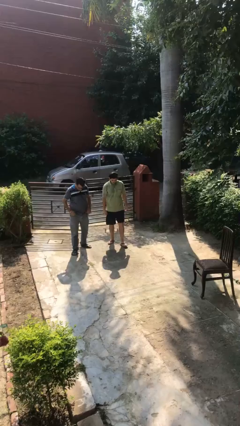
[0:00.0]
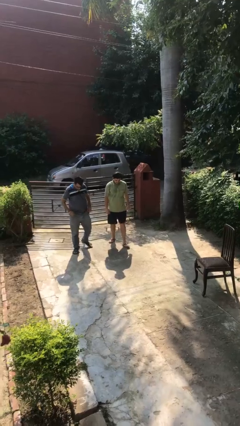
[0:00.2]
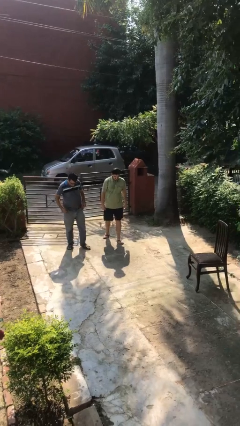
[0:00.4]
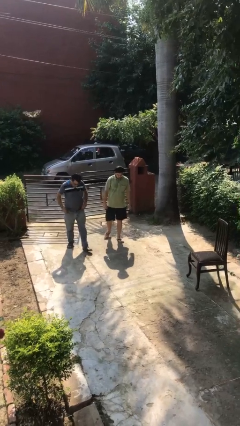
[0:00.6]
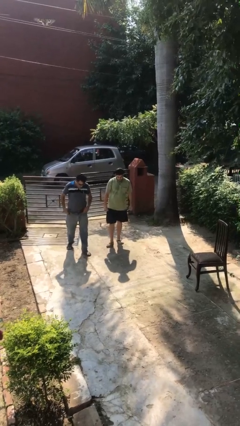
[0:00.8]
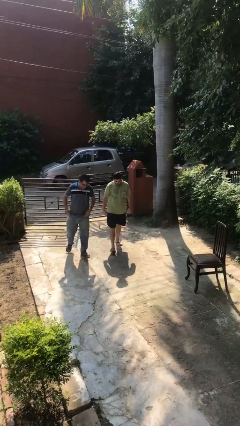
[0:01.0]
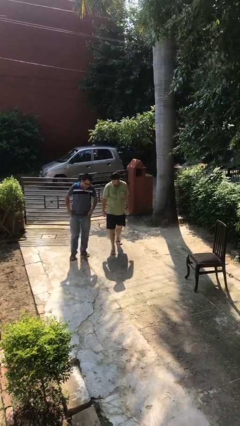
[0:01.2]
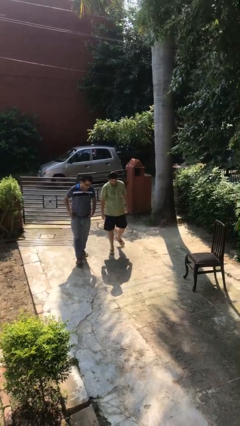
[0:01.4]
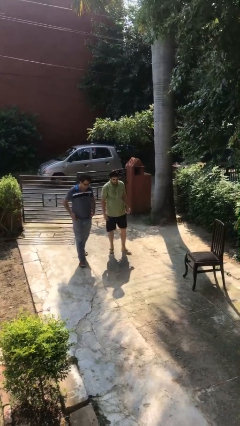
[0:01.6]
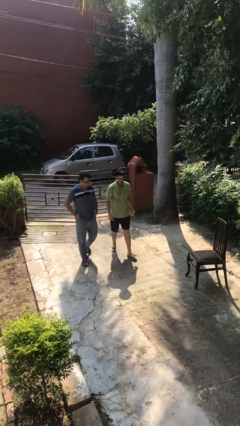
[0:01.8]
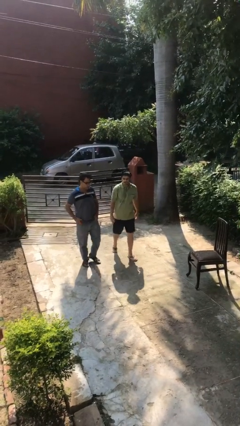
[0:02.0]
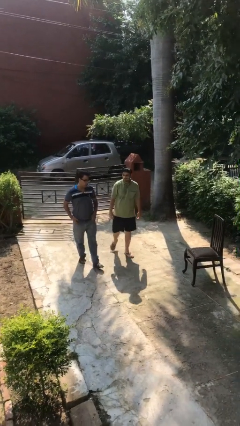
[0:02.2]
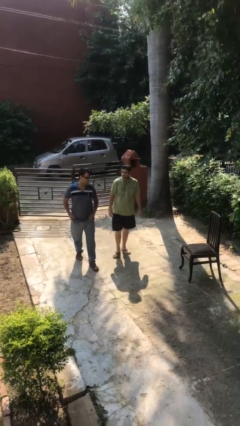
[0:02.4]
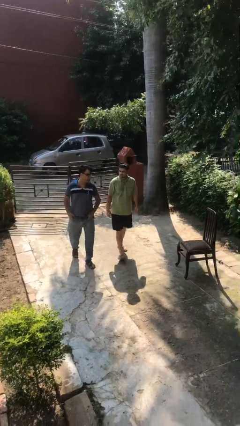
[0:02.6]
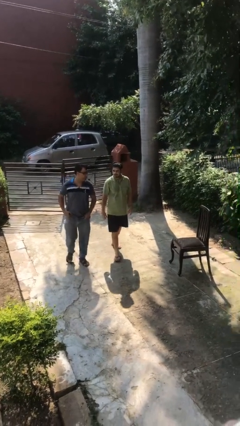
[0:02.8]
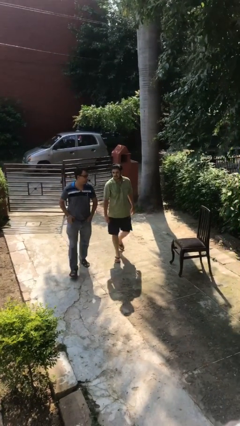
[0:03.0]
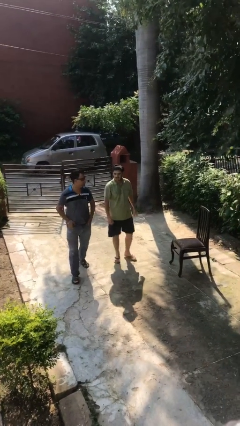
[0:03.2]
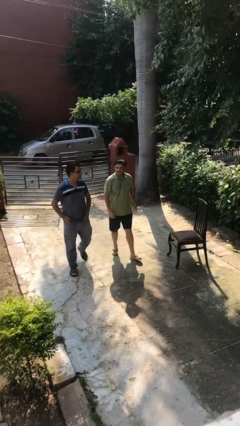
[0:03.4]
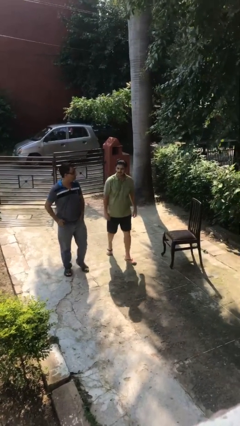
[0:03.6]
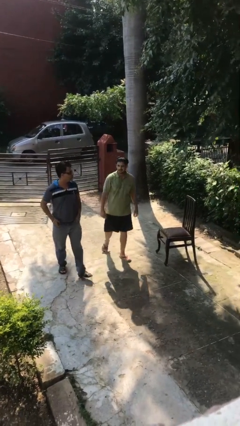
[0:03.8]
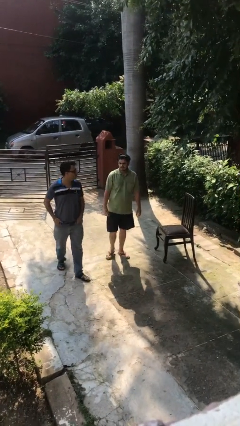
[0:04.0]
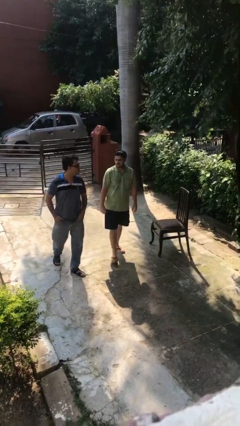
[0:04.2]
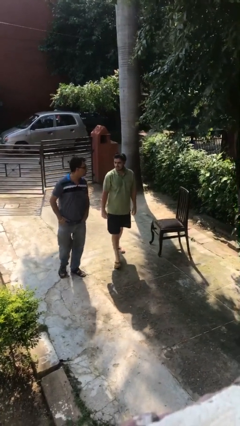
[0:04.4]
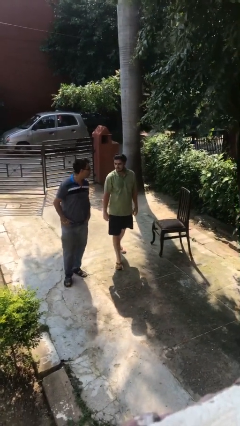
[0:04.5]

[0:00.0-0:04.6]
person talks to person

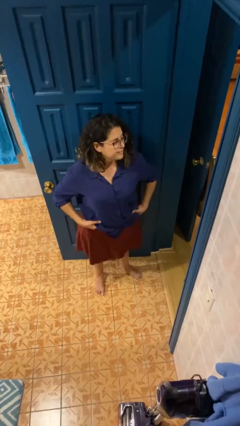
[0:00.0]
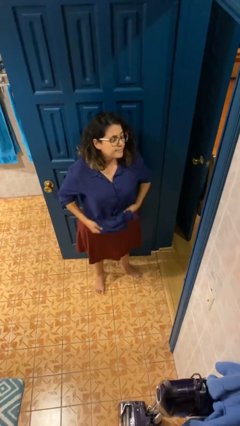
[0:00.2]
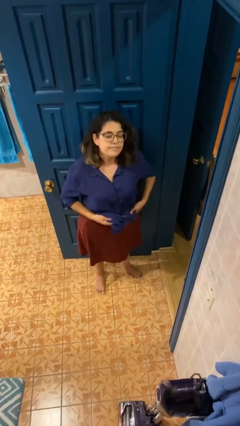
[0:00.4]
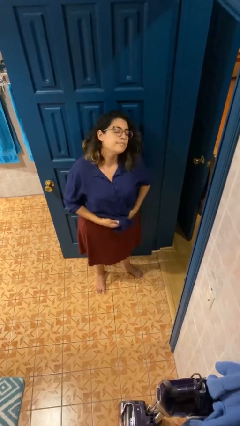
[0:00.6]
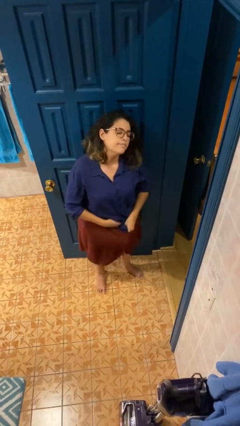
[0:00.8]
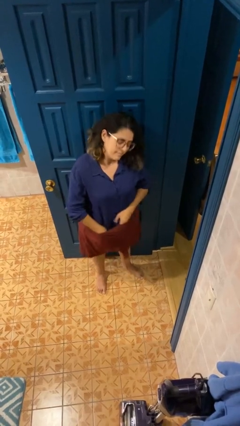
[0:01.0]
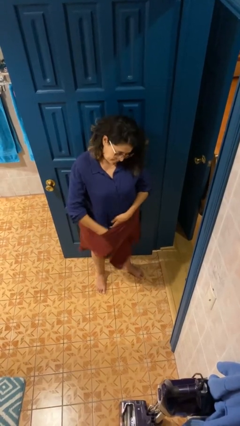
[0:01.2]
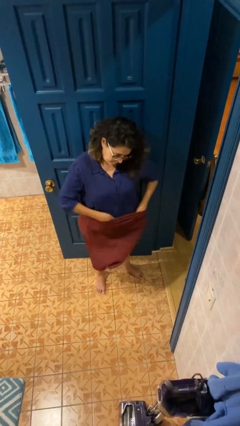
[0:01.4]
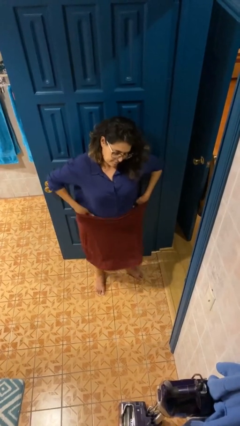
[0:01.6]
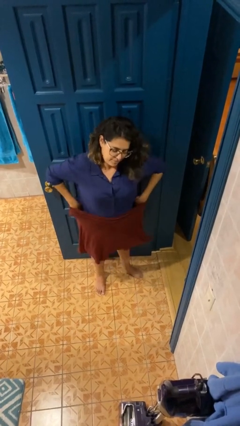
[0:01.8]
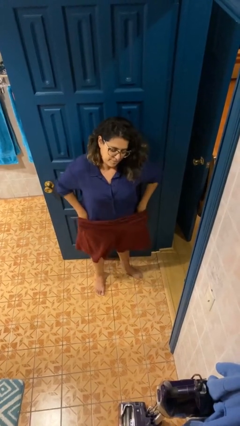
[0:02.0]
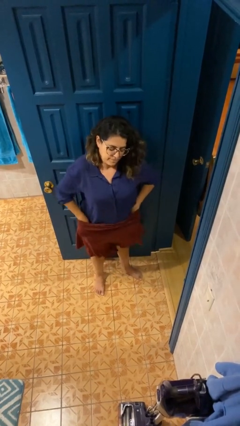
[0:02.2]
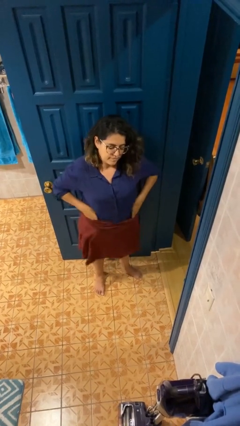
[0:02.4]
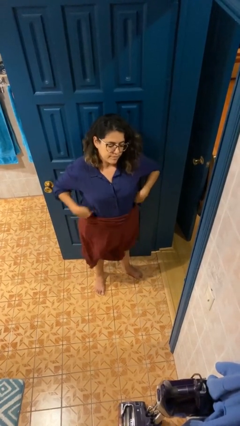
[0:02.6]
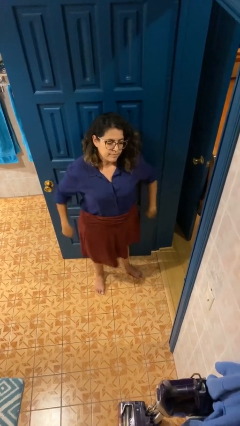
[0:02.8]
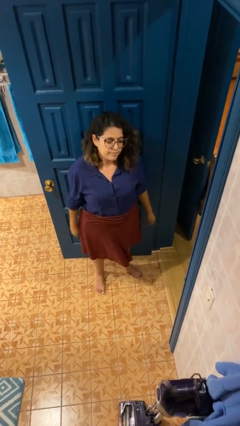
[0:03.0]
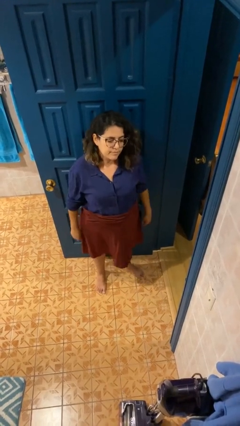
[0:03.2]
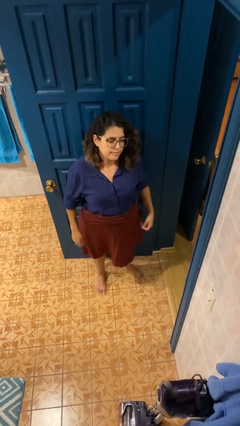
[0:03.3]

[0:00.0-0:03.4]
person tucks in shirt

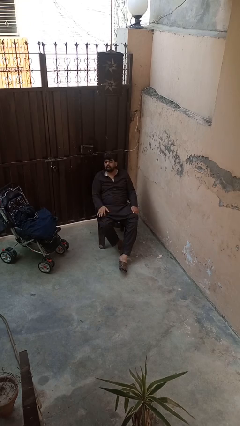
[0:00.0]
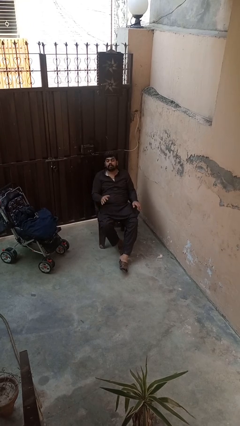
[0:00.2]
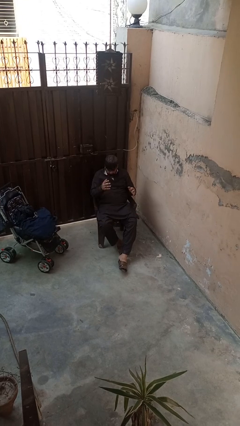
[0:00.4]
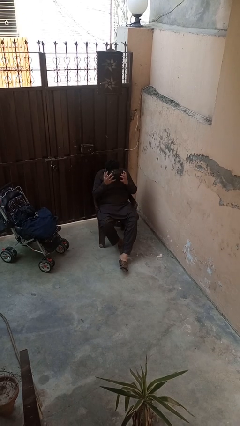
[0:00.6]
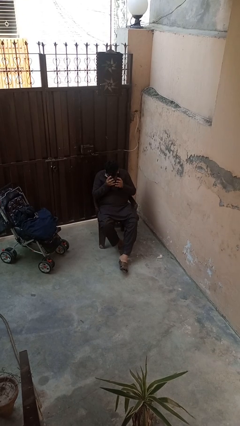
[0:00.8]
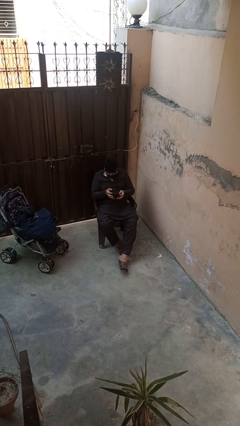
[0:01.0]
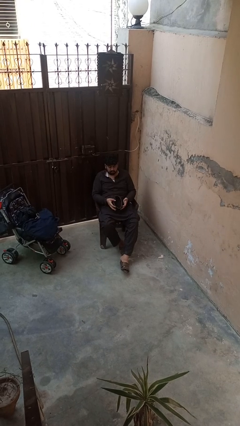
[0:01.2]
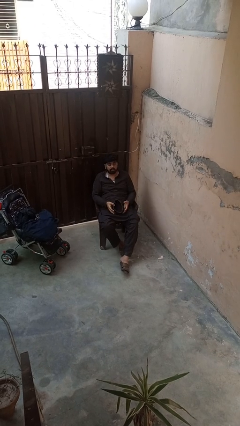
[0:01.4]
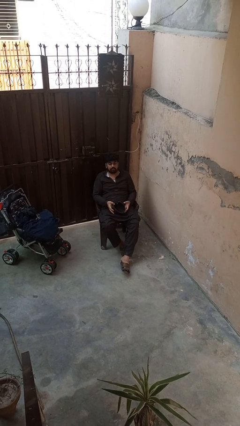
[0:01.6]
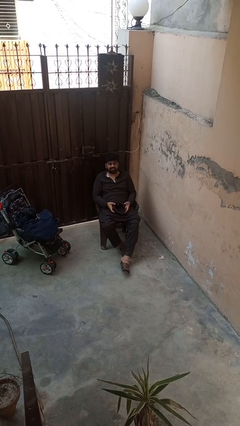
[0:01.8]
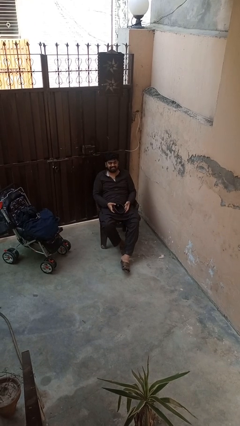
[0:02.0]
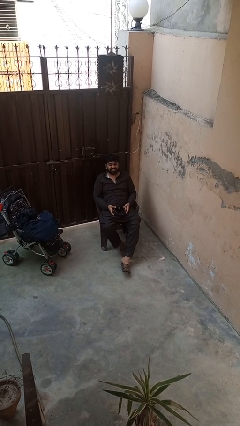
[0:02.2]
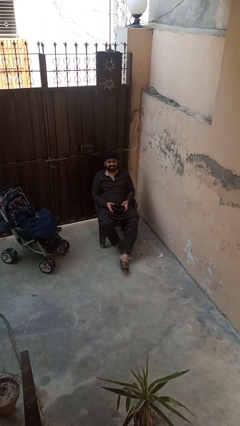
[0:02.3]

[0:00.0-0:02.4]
person takes off hat

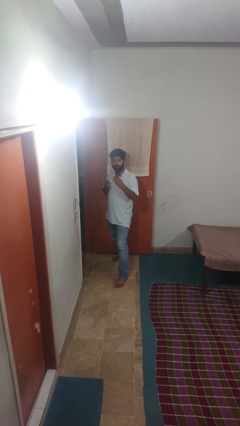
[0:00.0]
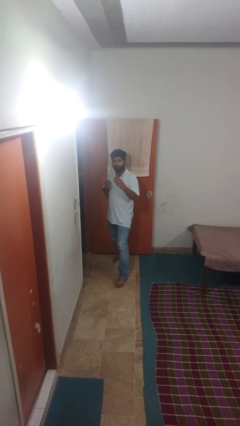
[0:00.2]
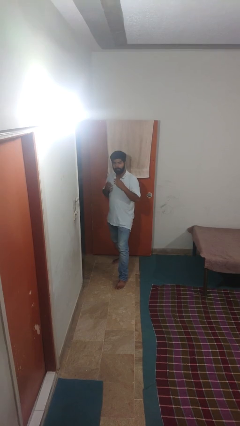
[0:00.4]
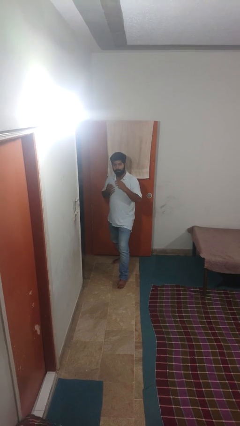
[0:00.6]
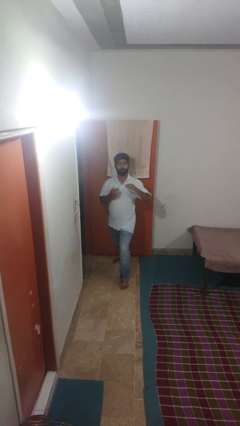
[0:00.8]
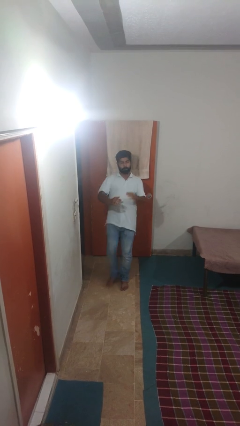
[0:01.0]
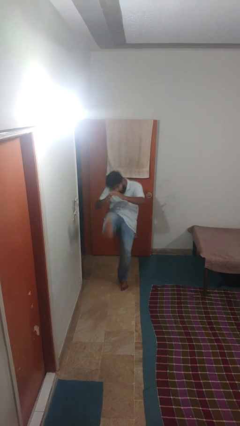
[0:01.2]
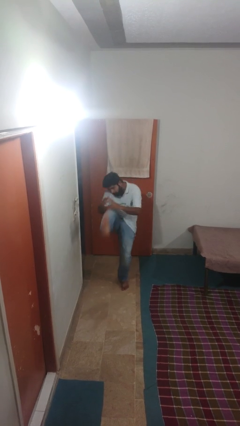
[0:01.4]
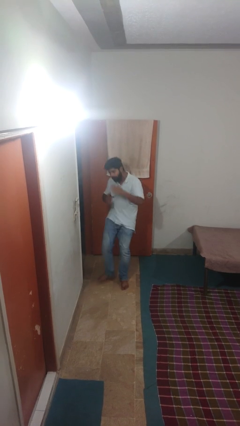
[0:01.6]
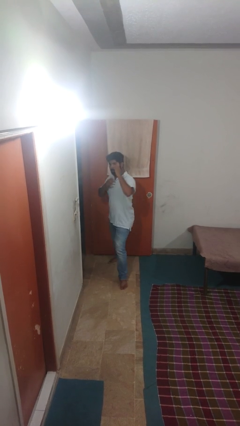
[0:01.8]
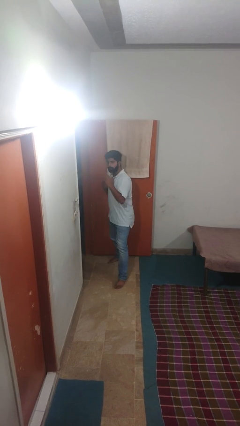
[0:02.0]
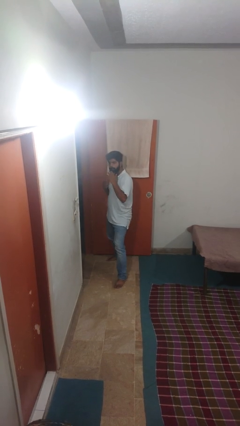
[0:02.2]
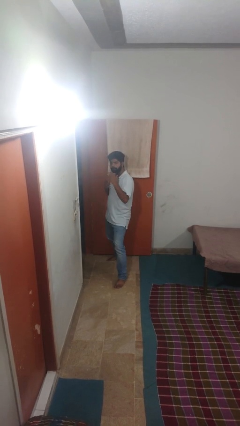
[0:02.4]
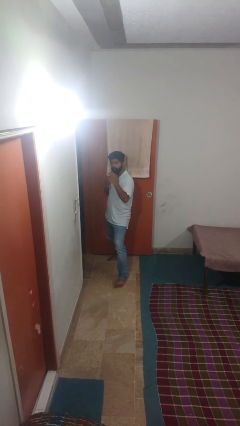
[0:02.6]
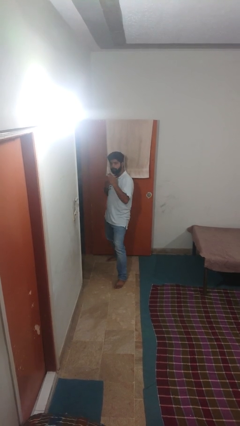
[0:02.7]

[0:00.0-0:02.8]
person karate kicks

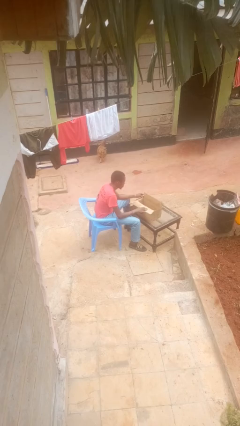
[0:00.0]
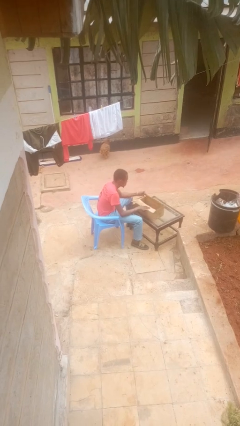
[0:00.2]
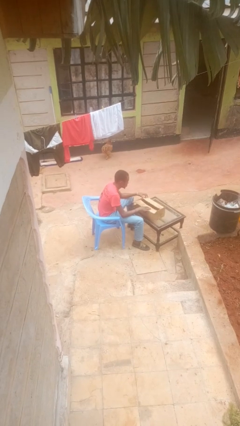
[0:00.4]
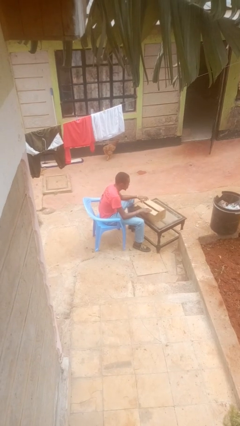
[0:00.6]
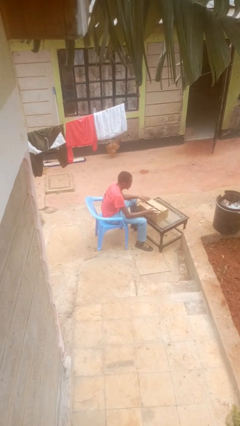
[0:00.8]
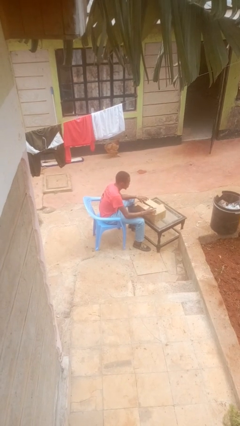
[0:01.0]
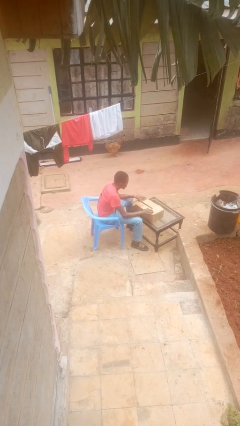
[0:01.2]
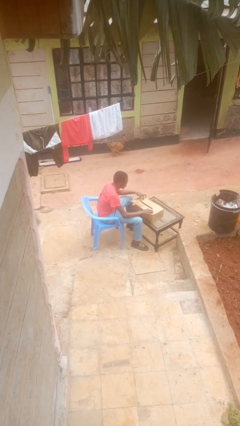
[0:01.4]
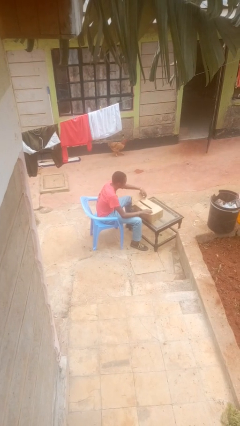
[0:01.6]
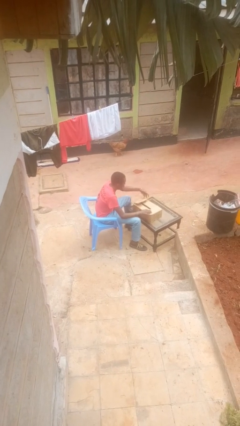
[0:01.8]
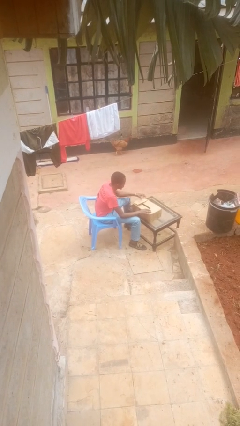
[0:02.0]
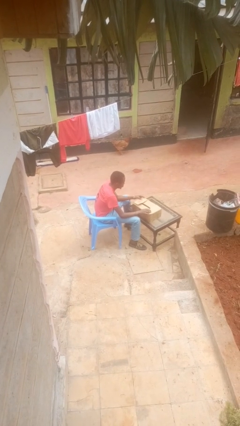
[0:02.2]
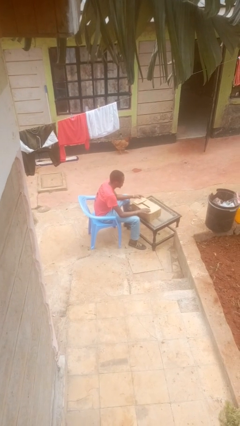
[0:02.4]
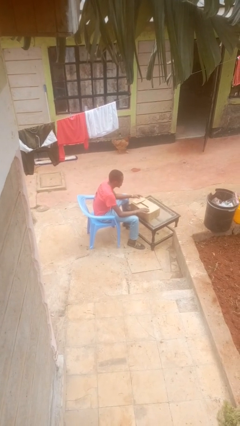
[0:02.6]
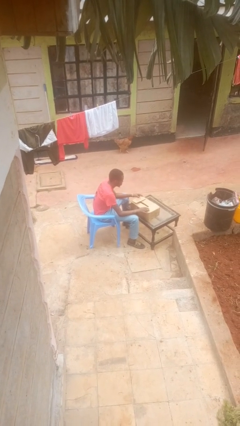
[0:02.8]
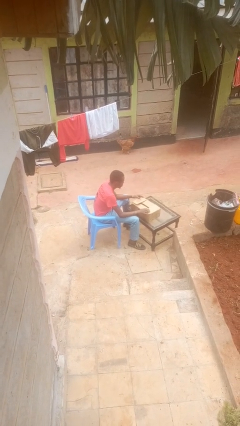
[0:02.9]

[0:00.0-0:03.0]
person closes box

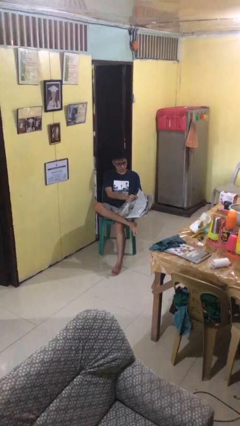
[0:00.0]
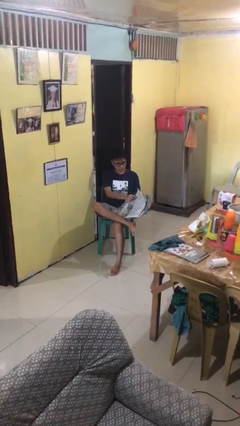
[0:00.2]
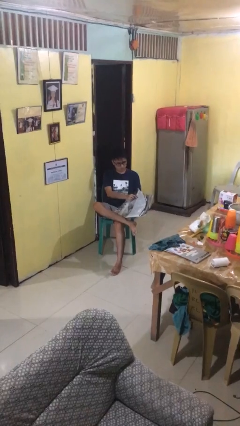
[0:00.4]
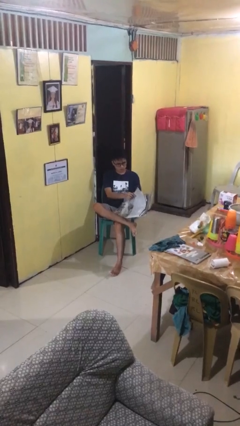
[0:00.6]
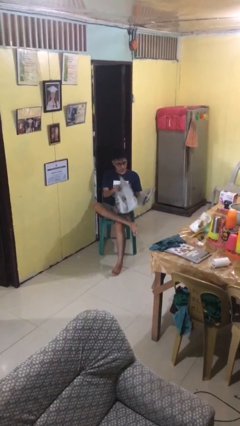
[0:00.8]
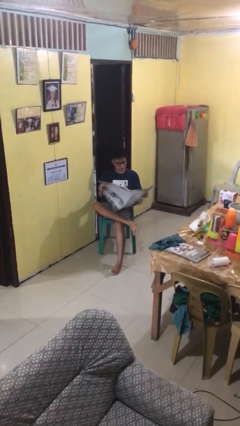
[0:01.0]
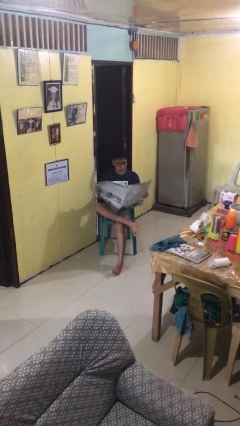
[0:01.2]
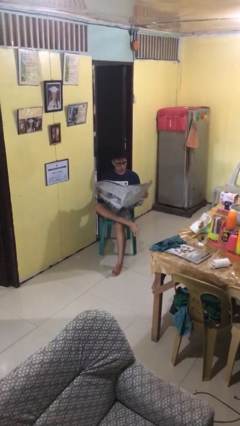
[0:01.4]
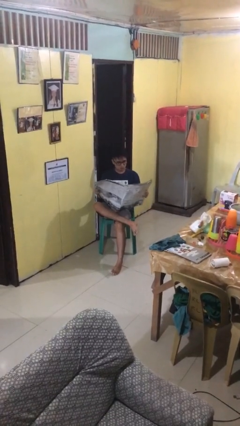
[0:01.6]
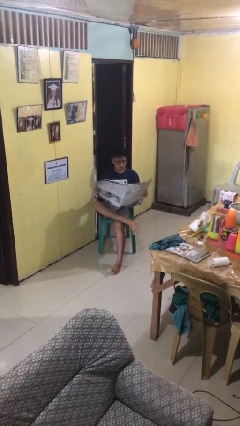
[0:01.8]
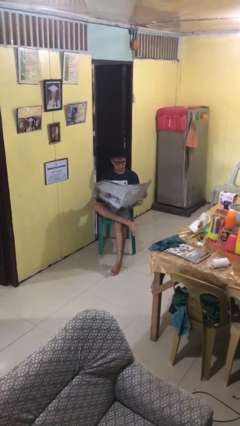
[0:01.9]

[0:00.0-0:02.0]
person reads newspaper
